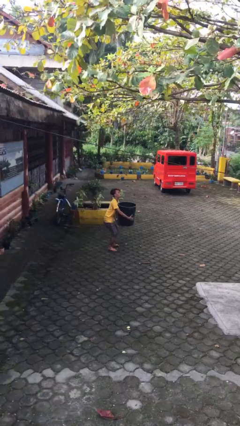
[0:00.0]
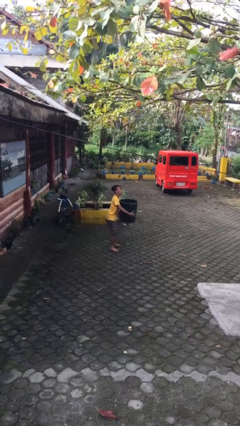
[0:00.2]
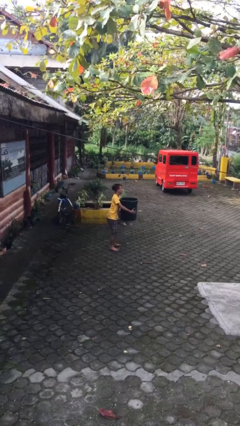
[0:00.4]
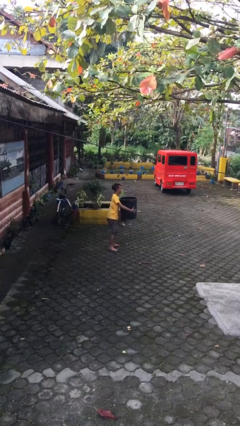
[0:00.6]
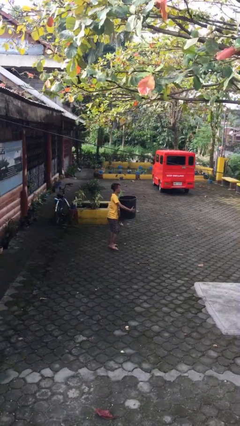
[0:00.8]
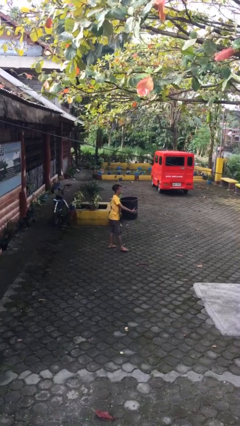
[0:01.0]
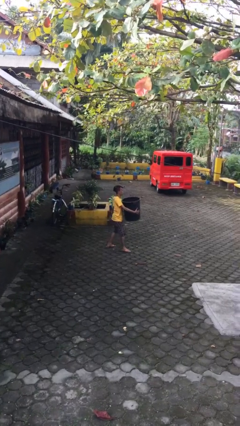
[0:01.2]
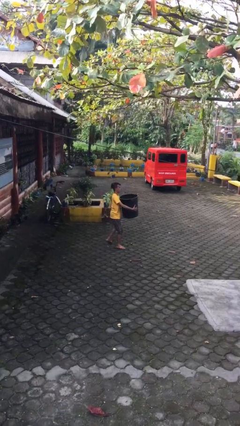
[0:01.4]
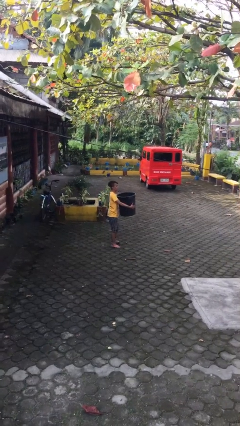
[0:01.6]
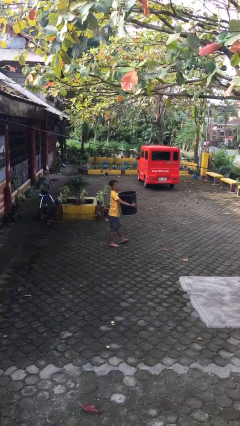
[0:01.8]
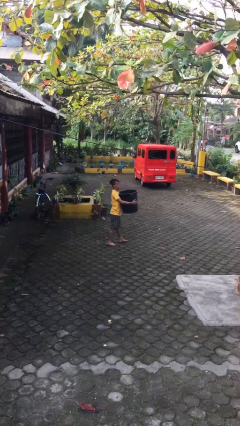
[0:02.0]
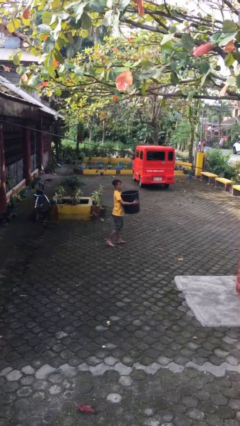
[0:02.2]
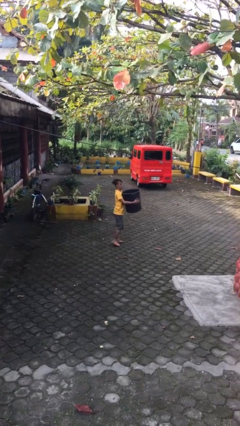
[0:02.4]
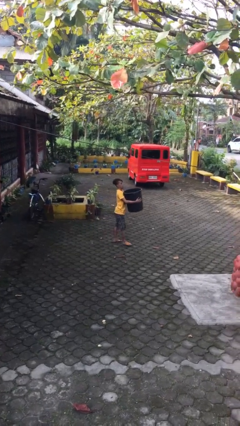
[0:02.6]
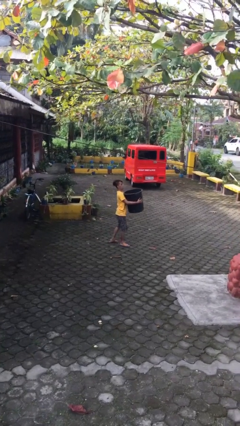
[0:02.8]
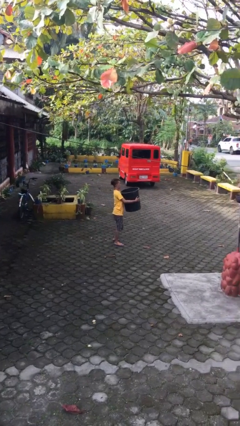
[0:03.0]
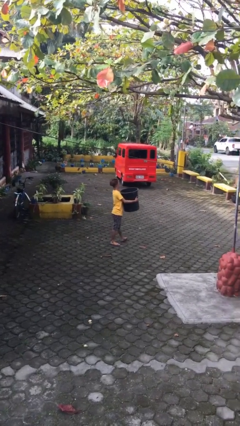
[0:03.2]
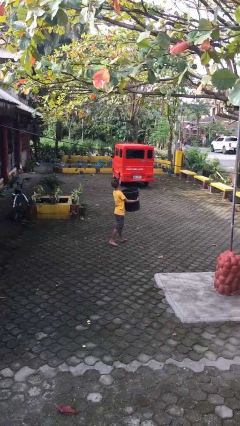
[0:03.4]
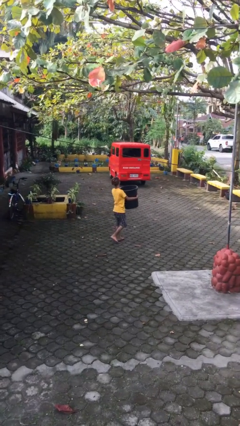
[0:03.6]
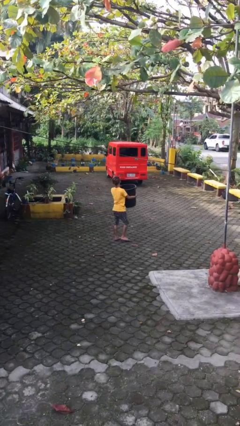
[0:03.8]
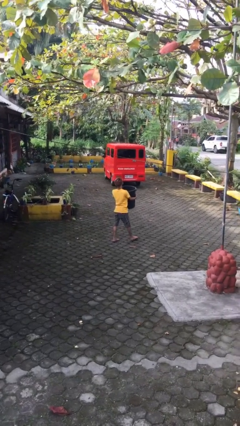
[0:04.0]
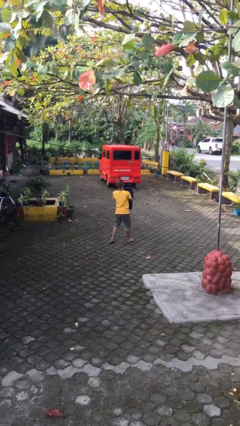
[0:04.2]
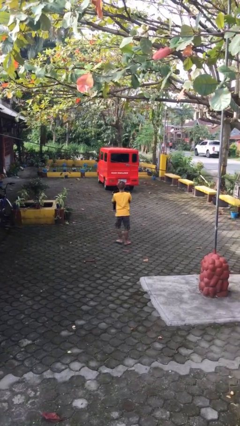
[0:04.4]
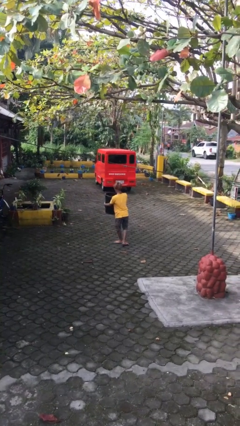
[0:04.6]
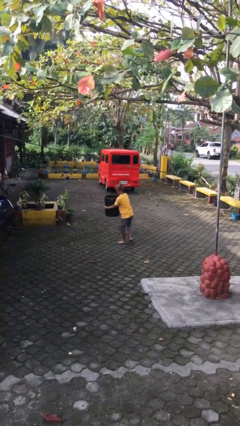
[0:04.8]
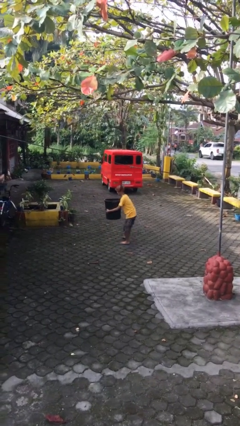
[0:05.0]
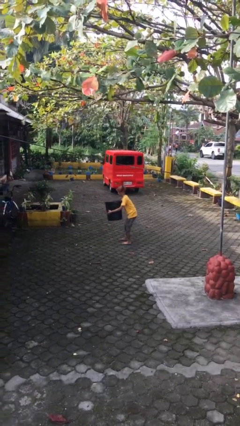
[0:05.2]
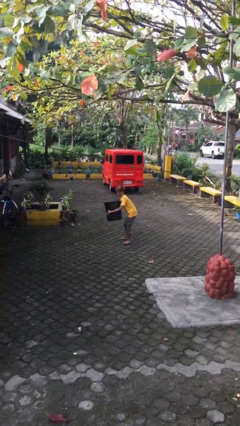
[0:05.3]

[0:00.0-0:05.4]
person carries heavy object

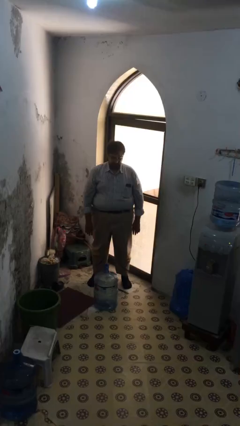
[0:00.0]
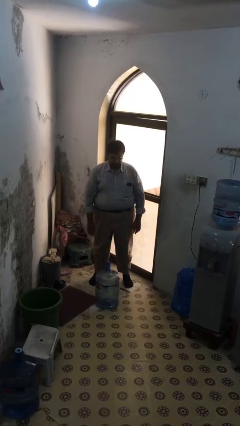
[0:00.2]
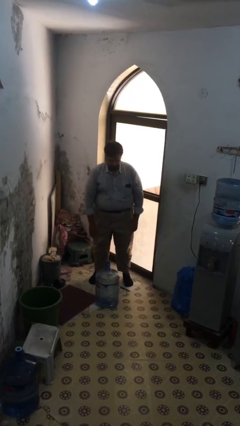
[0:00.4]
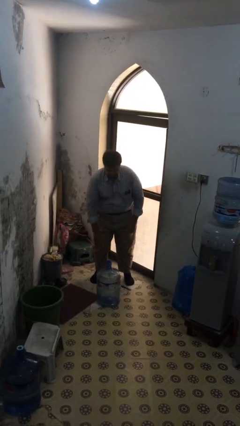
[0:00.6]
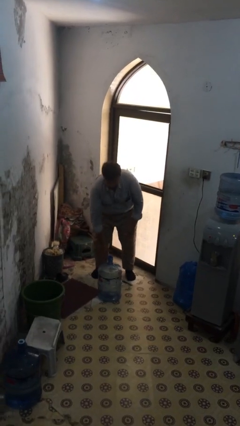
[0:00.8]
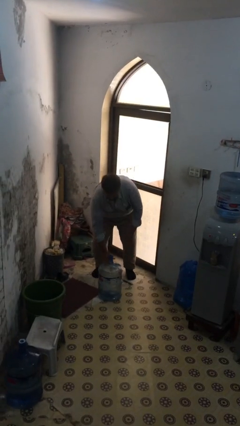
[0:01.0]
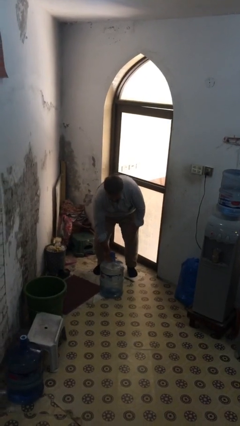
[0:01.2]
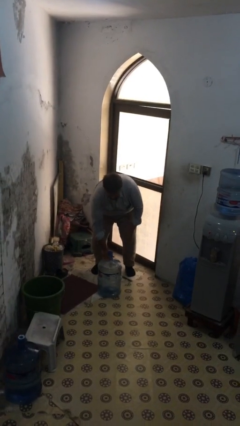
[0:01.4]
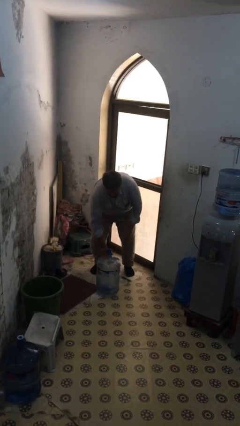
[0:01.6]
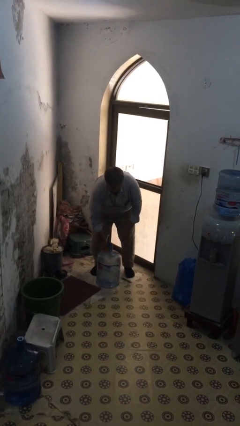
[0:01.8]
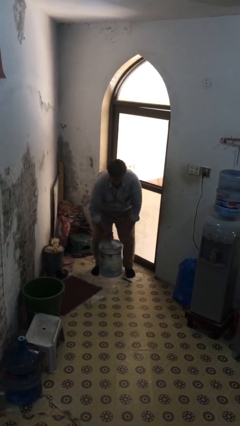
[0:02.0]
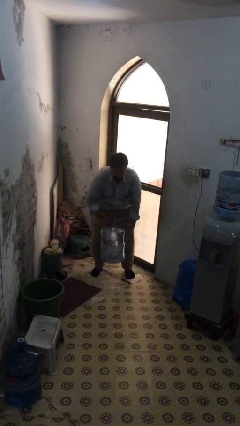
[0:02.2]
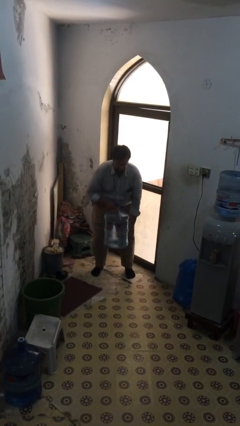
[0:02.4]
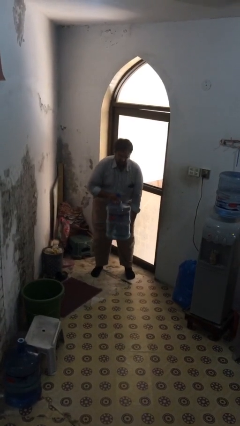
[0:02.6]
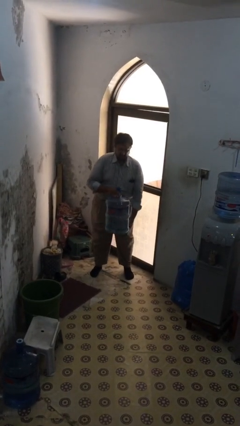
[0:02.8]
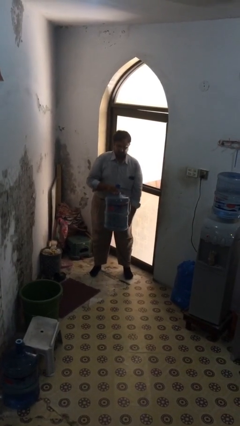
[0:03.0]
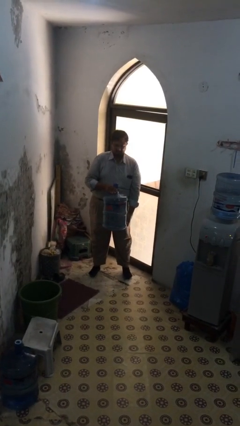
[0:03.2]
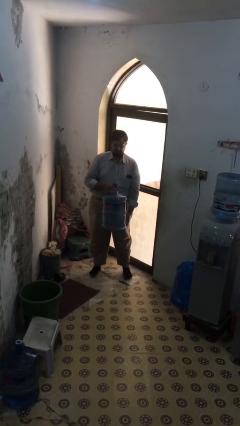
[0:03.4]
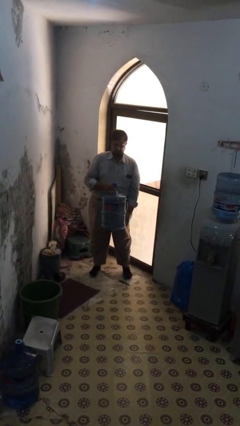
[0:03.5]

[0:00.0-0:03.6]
person picks up object from floor

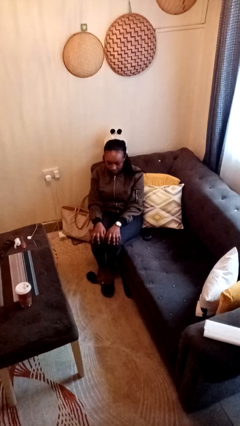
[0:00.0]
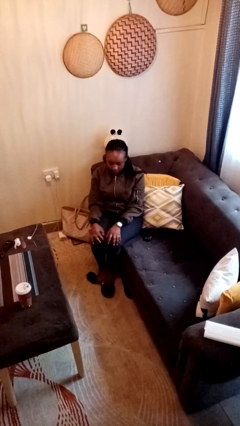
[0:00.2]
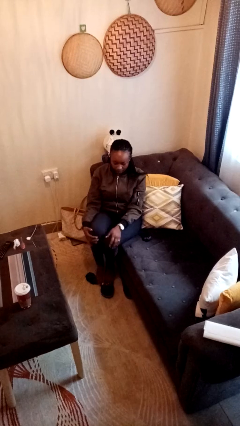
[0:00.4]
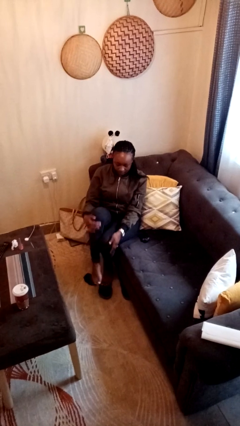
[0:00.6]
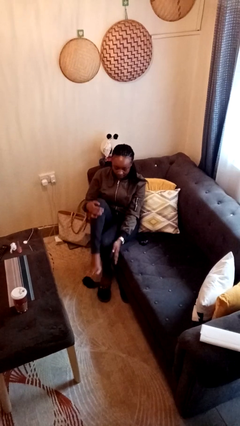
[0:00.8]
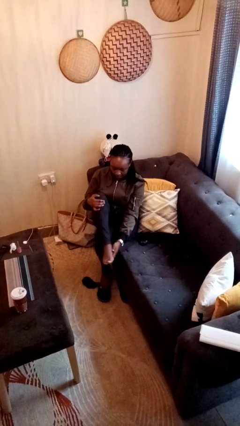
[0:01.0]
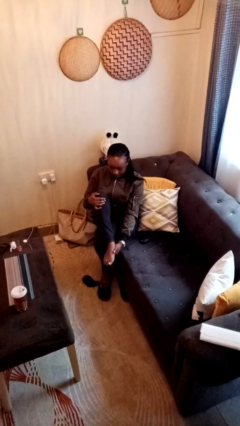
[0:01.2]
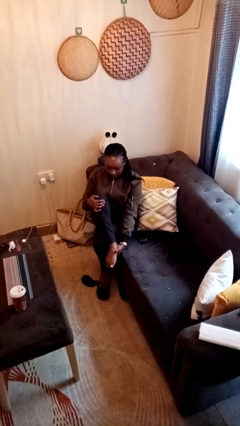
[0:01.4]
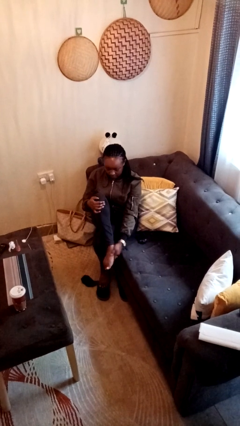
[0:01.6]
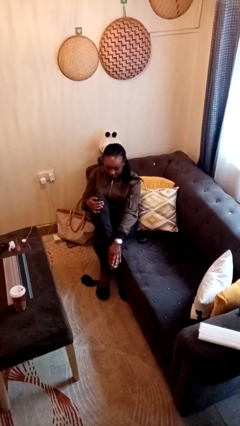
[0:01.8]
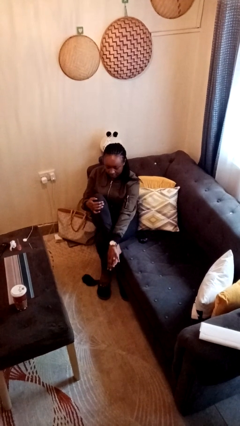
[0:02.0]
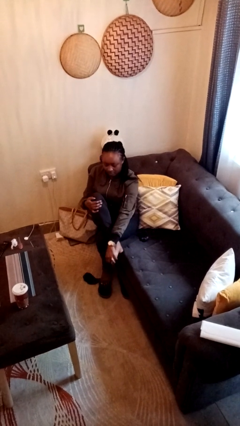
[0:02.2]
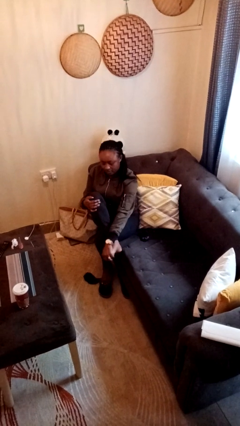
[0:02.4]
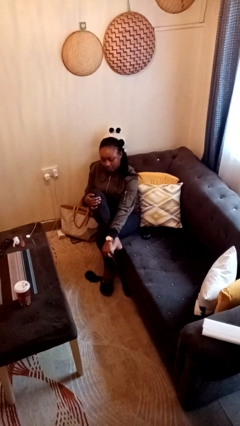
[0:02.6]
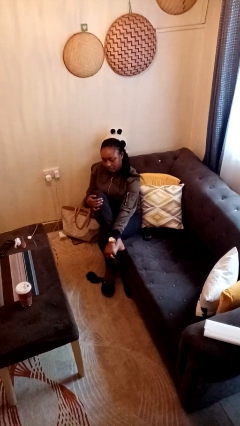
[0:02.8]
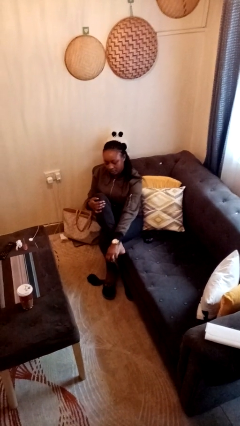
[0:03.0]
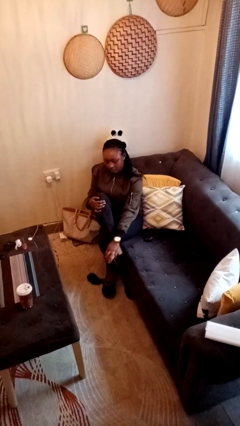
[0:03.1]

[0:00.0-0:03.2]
person rubs foot

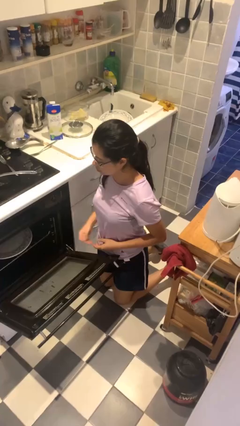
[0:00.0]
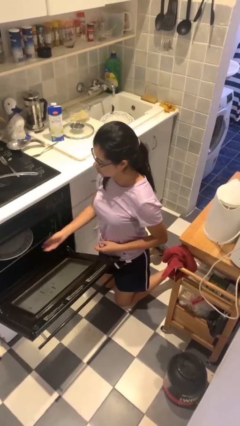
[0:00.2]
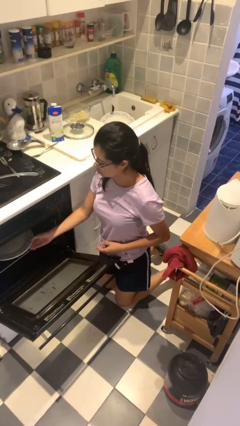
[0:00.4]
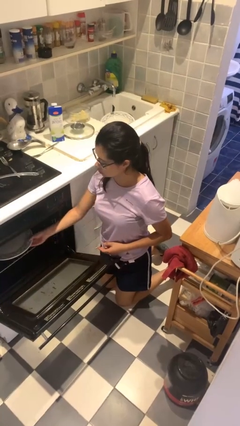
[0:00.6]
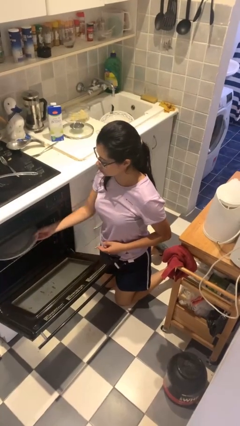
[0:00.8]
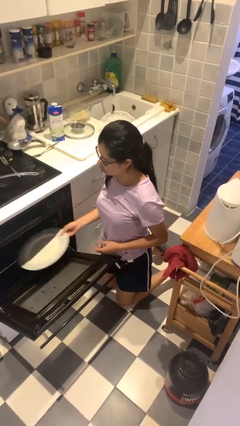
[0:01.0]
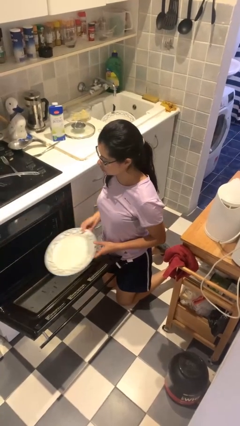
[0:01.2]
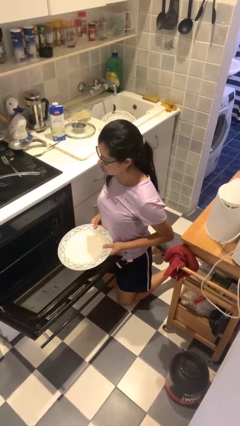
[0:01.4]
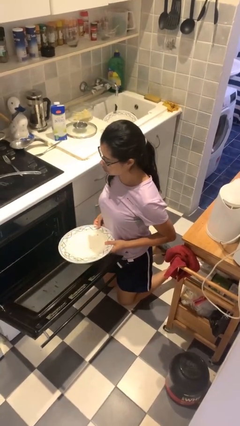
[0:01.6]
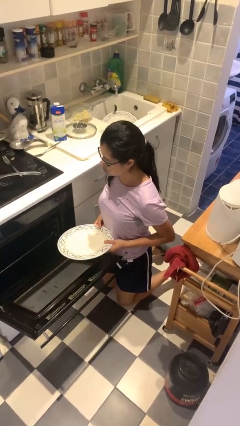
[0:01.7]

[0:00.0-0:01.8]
person unloads dishwasher

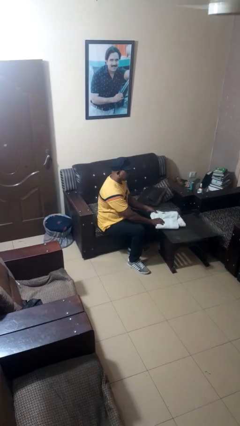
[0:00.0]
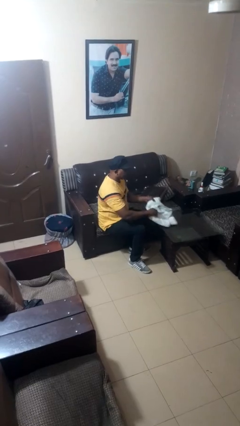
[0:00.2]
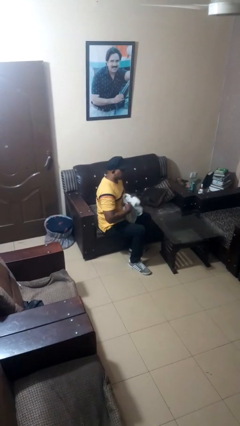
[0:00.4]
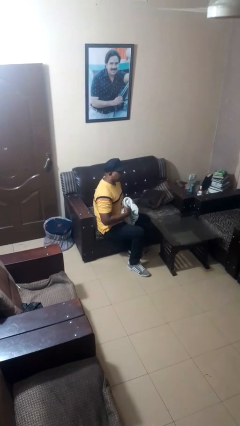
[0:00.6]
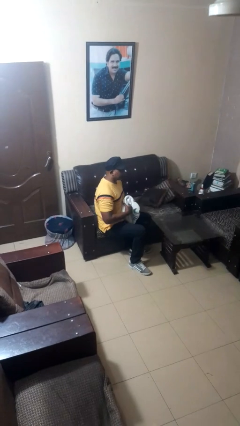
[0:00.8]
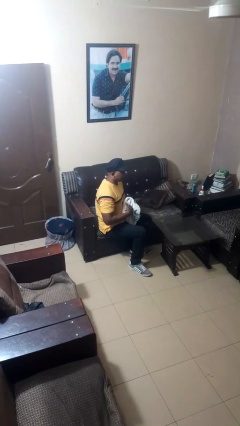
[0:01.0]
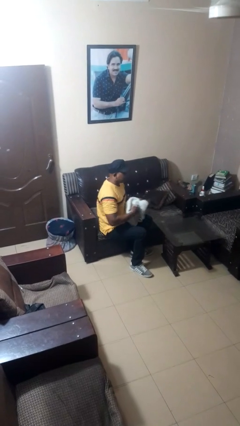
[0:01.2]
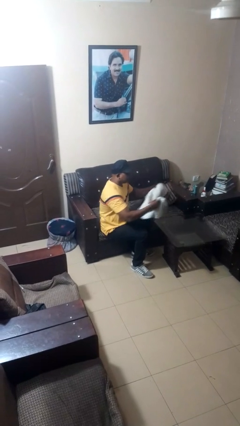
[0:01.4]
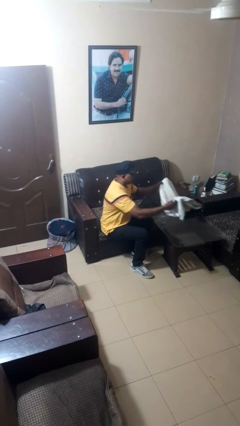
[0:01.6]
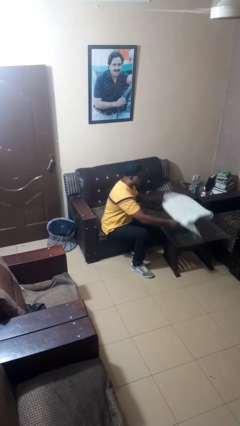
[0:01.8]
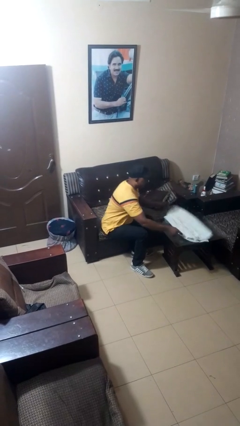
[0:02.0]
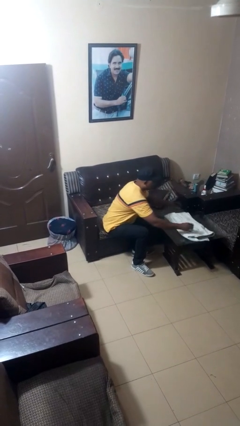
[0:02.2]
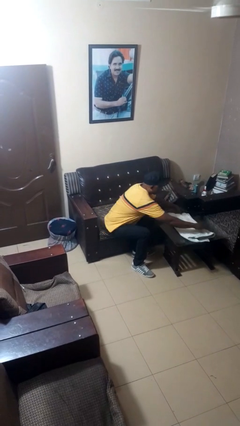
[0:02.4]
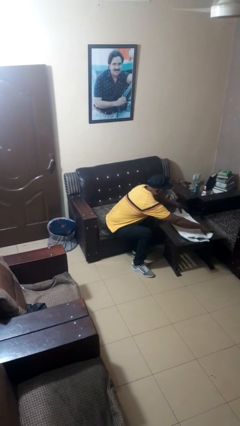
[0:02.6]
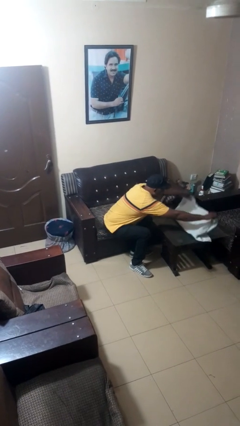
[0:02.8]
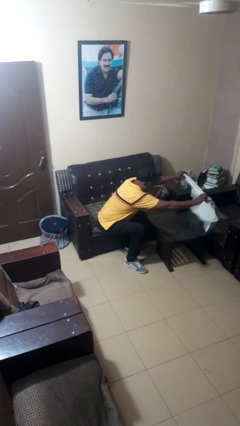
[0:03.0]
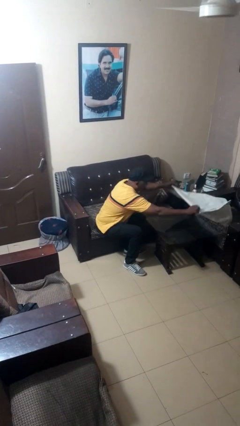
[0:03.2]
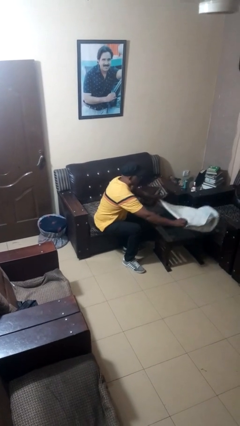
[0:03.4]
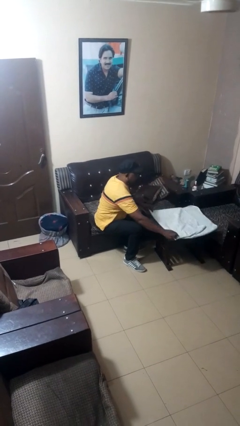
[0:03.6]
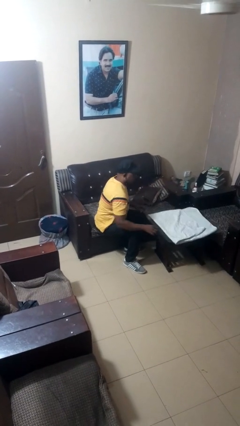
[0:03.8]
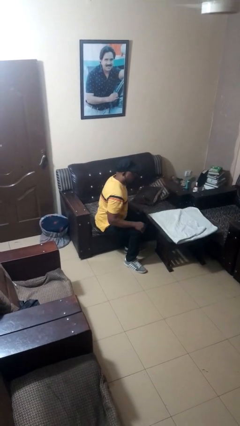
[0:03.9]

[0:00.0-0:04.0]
person spreads tablecloth
